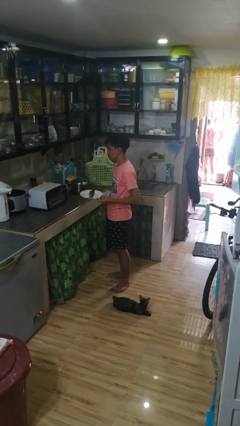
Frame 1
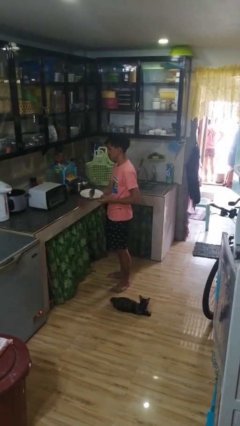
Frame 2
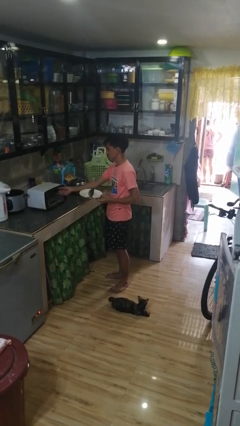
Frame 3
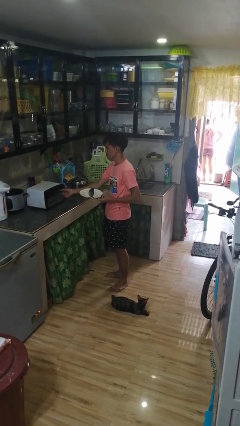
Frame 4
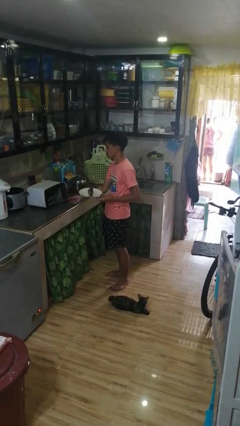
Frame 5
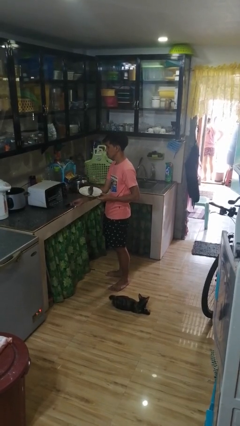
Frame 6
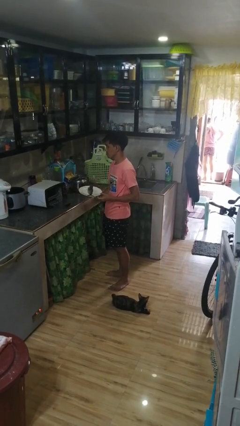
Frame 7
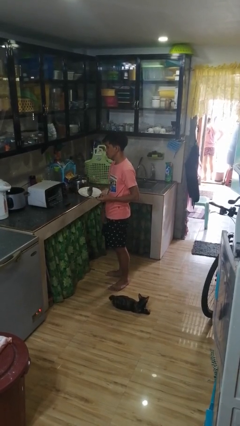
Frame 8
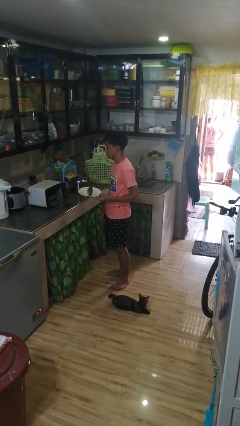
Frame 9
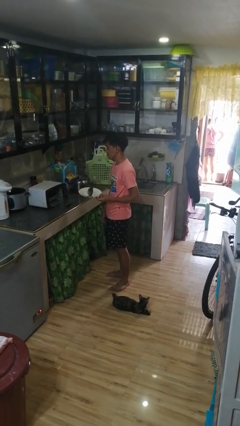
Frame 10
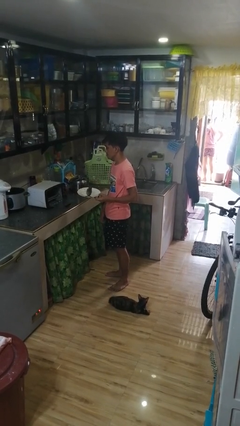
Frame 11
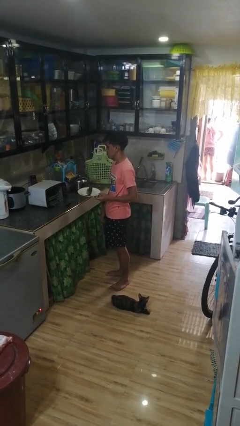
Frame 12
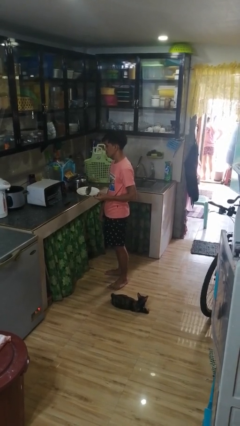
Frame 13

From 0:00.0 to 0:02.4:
person opens microwave

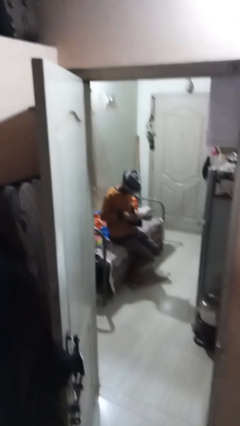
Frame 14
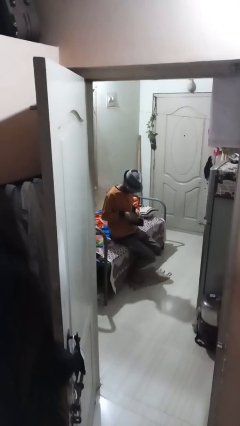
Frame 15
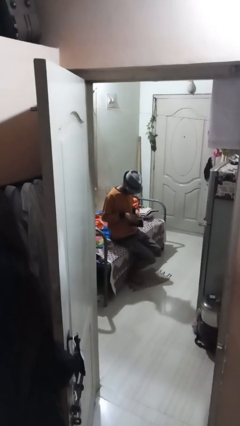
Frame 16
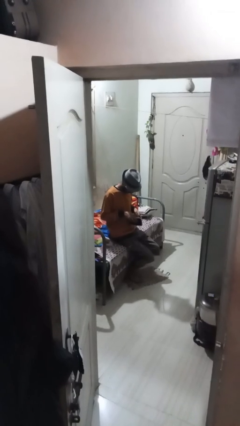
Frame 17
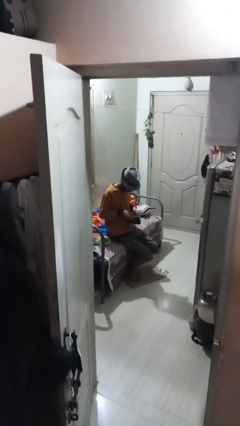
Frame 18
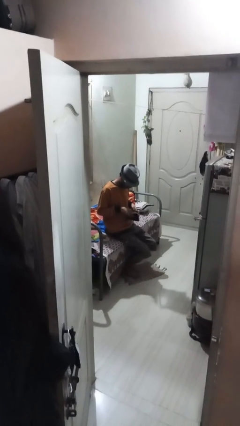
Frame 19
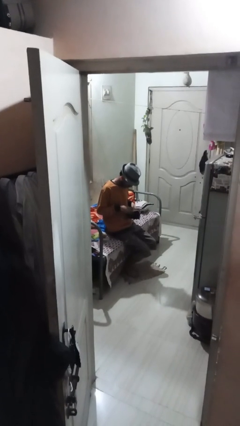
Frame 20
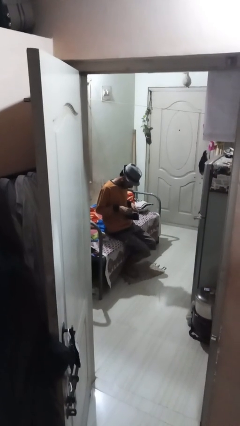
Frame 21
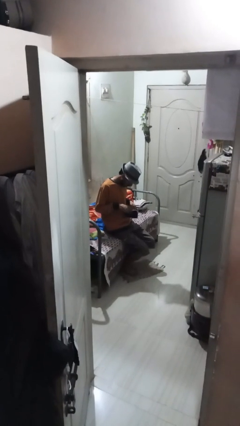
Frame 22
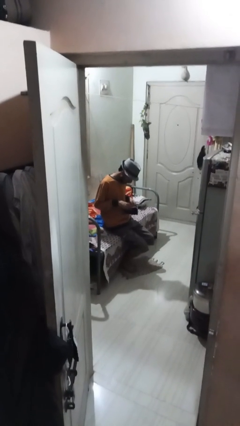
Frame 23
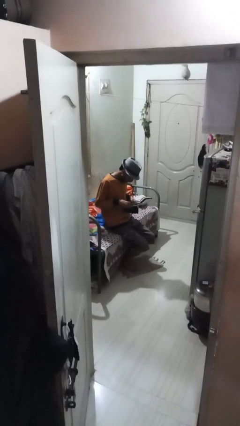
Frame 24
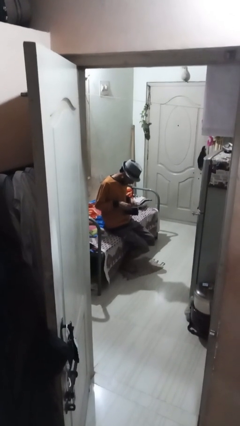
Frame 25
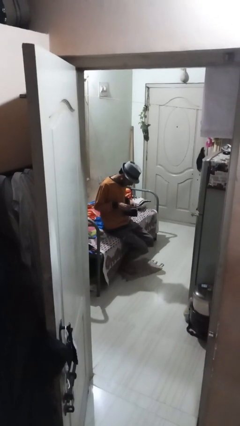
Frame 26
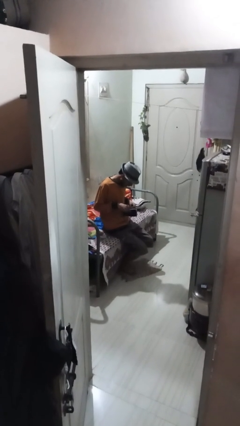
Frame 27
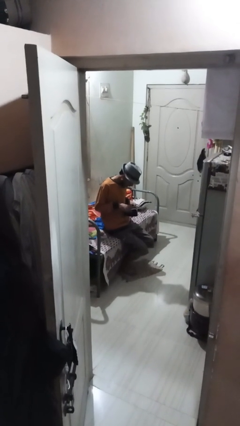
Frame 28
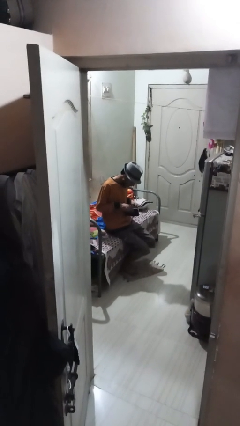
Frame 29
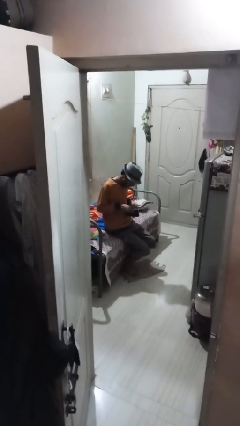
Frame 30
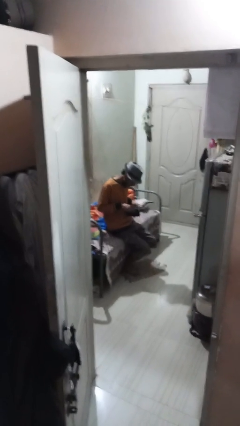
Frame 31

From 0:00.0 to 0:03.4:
person searches in purse

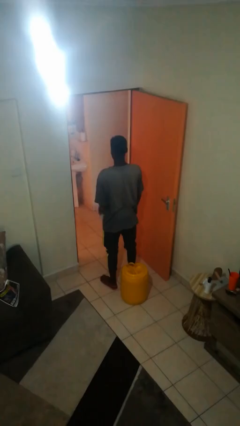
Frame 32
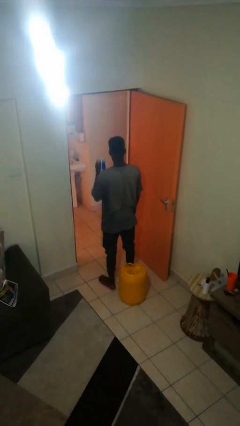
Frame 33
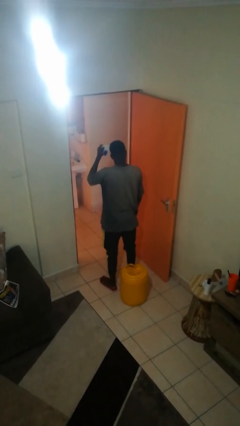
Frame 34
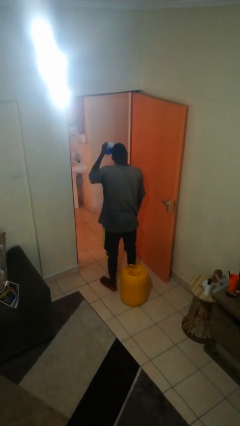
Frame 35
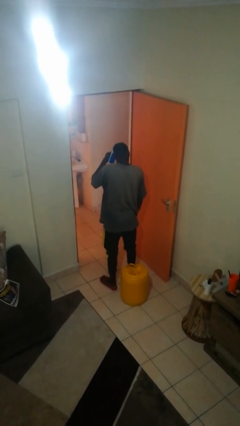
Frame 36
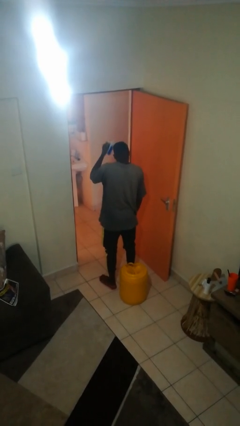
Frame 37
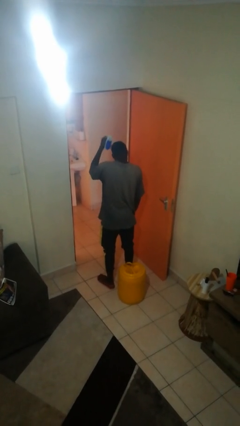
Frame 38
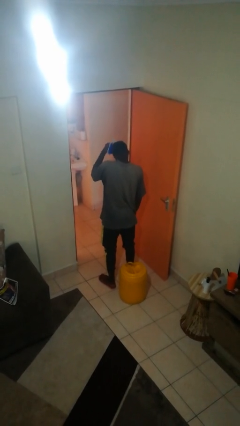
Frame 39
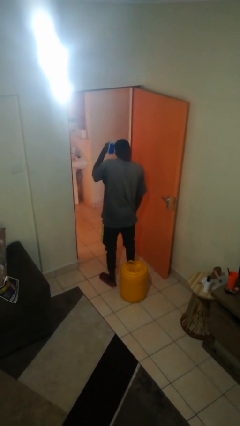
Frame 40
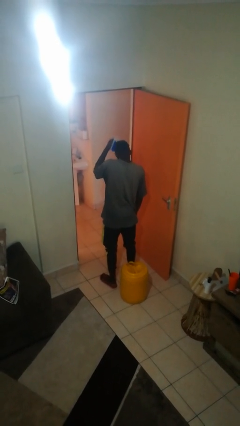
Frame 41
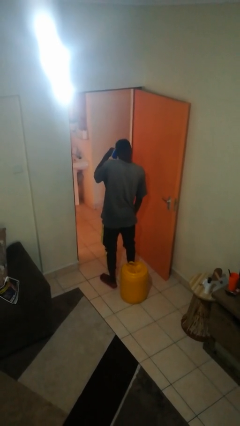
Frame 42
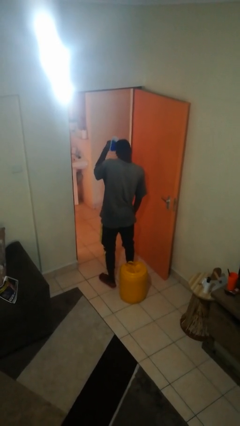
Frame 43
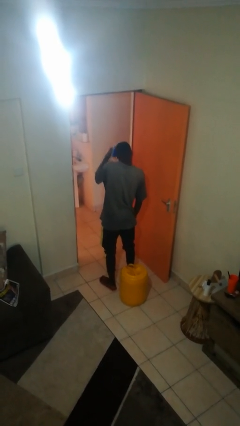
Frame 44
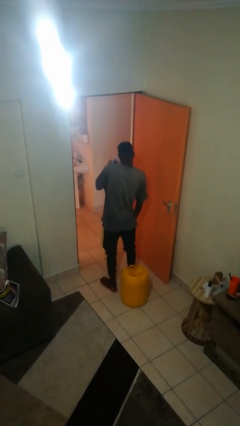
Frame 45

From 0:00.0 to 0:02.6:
person brushes hair

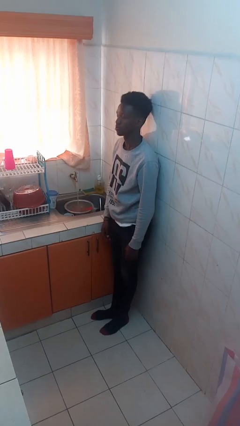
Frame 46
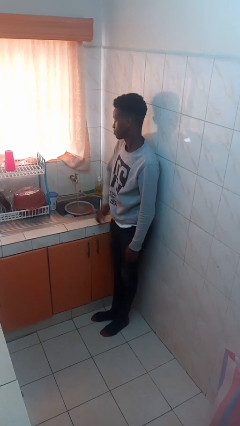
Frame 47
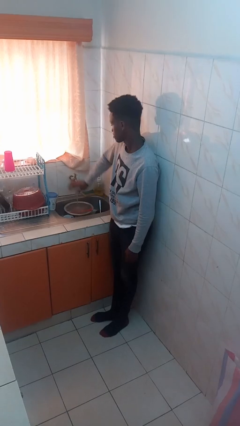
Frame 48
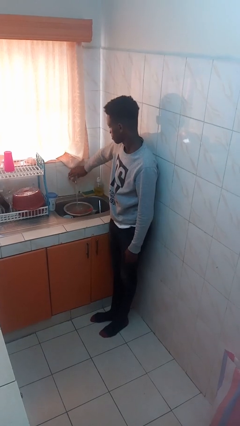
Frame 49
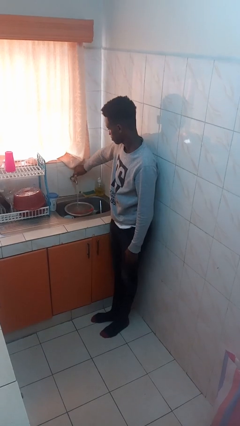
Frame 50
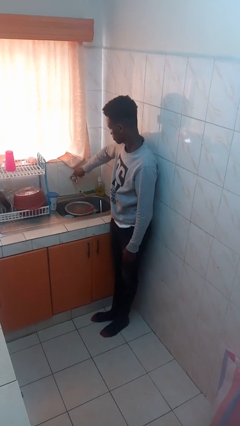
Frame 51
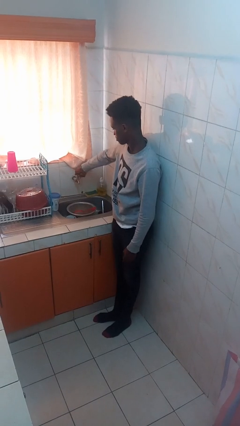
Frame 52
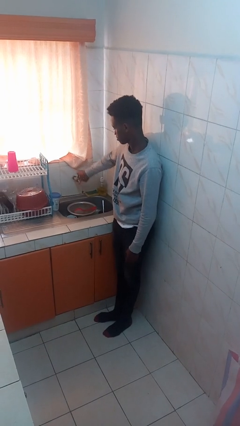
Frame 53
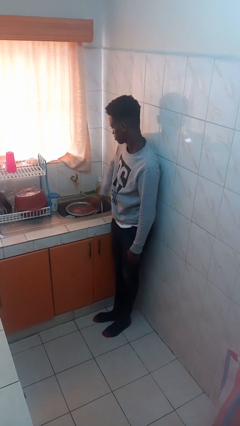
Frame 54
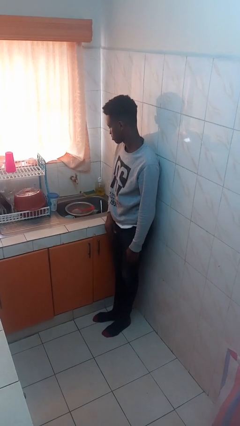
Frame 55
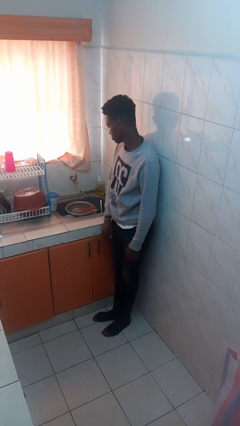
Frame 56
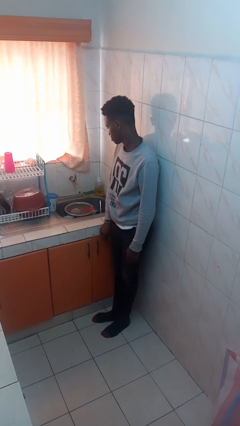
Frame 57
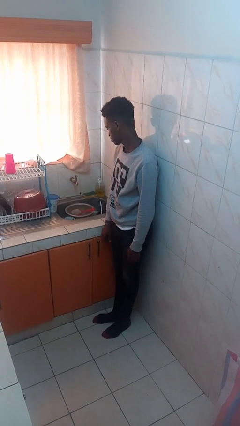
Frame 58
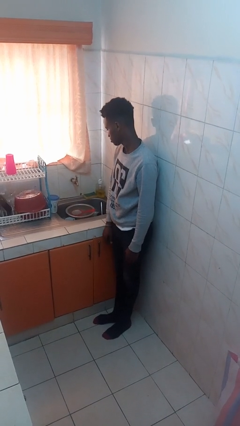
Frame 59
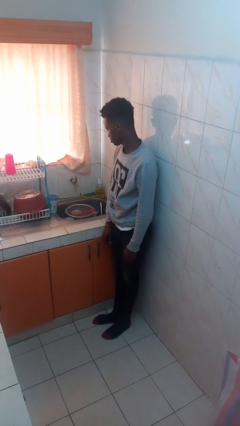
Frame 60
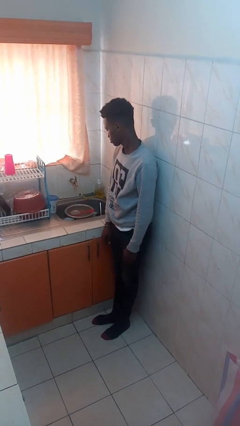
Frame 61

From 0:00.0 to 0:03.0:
person turns off faucet

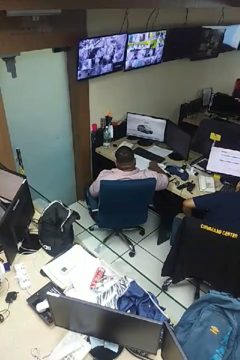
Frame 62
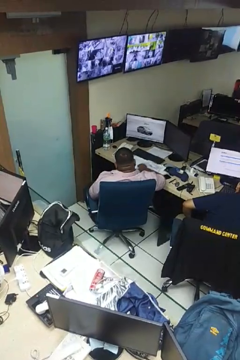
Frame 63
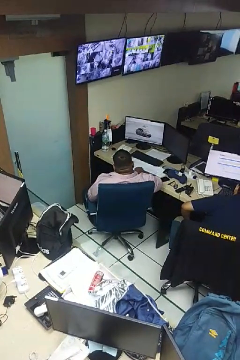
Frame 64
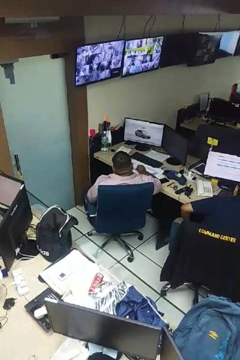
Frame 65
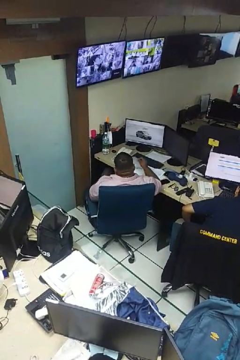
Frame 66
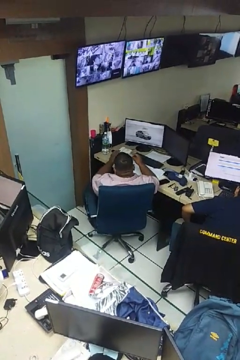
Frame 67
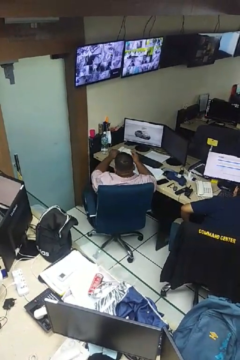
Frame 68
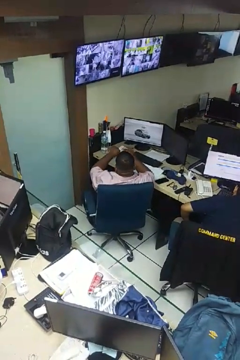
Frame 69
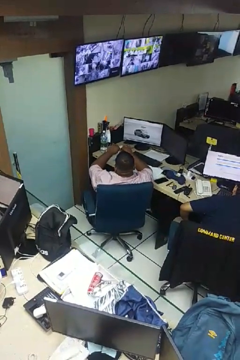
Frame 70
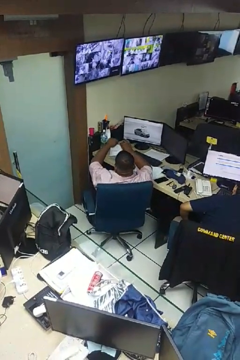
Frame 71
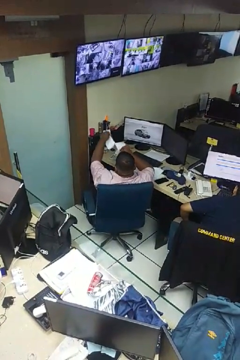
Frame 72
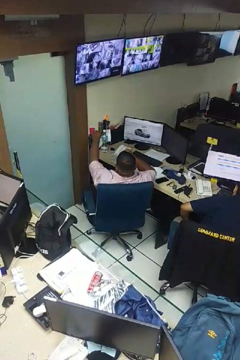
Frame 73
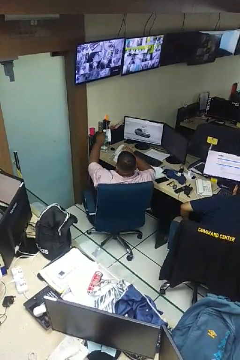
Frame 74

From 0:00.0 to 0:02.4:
person tears paper

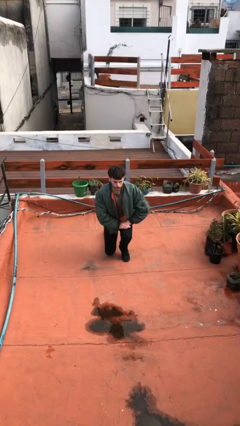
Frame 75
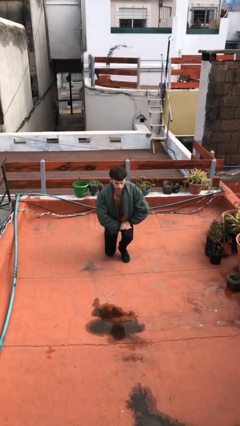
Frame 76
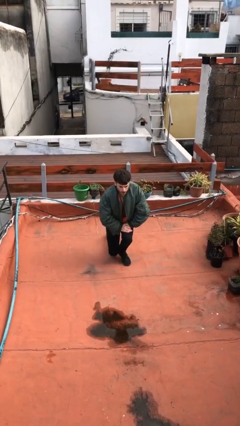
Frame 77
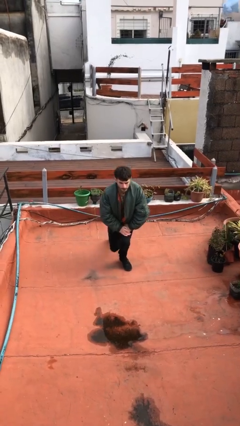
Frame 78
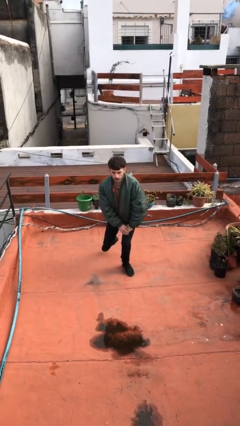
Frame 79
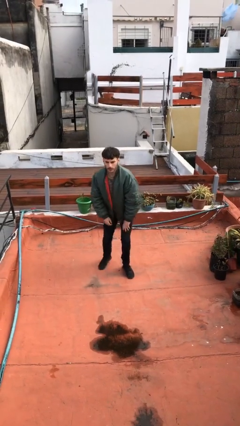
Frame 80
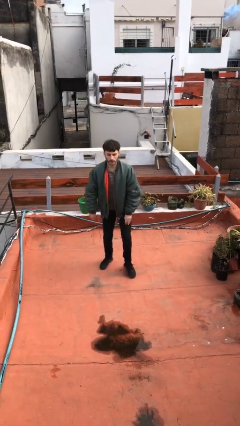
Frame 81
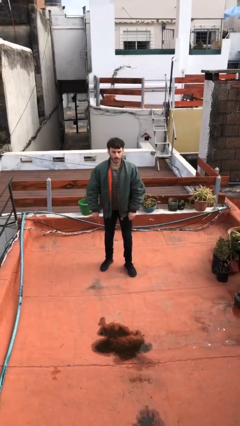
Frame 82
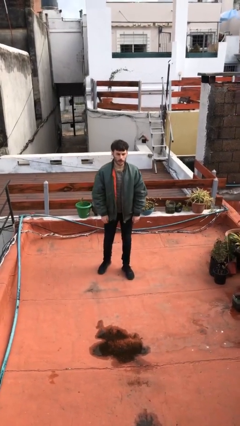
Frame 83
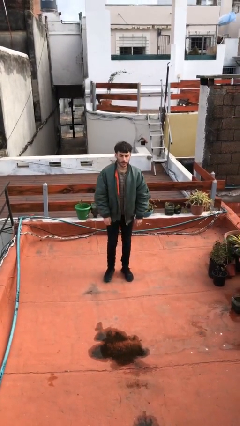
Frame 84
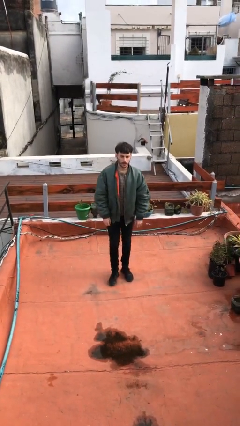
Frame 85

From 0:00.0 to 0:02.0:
person stands up from floor

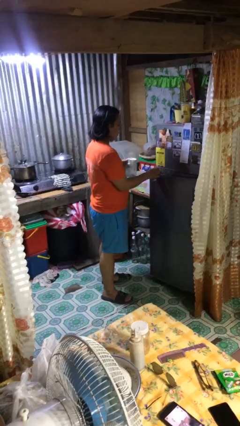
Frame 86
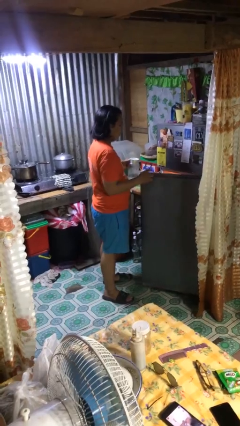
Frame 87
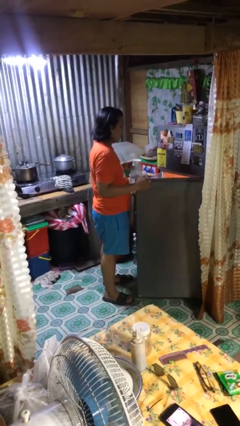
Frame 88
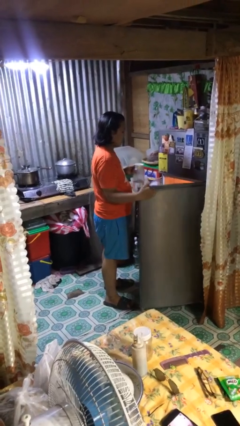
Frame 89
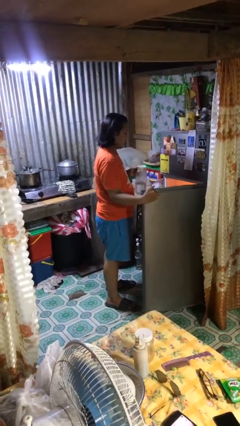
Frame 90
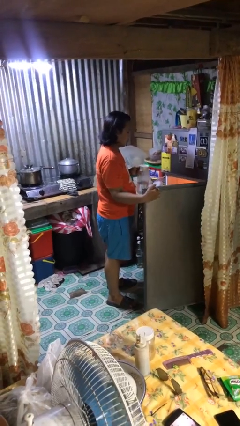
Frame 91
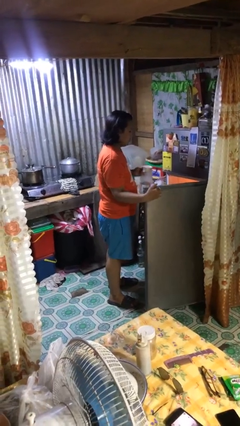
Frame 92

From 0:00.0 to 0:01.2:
person opens refrigerator

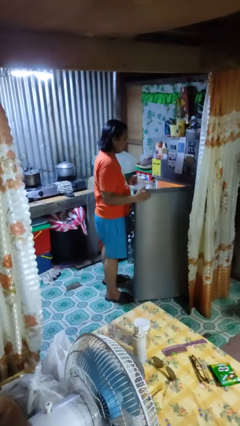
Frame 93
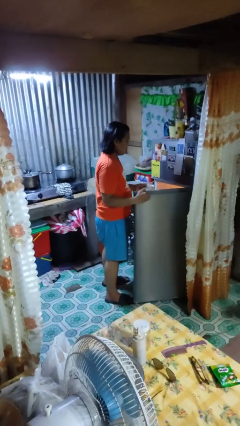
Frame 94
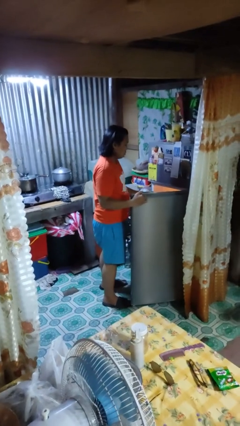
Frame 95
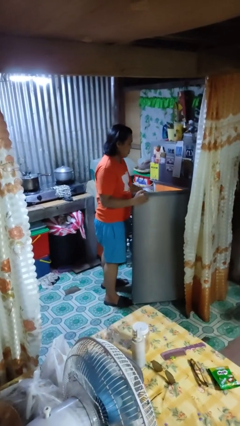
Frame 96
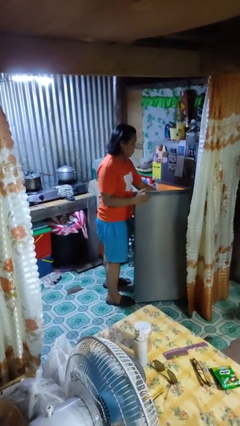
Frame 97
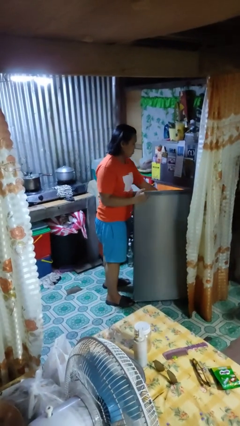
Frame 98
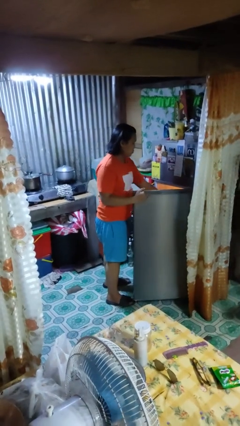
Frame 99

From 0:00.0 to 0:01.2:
person puts object into refrigerator
